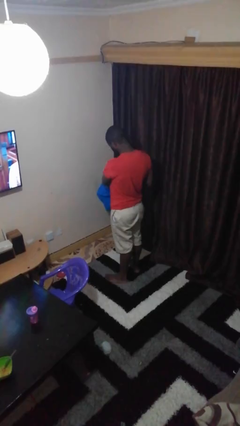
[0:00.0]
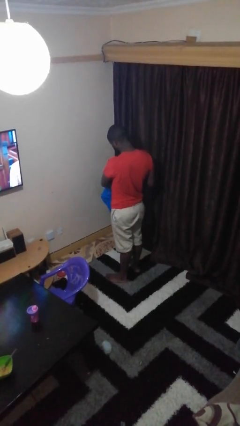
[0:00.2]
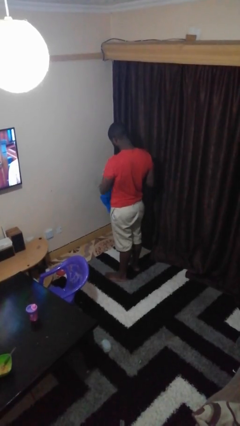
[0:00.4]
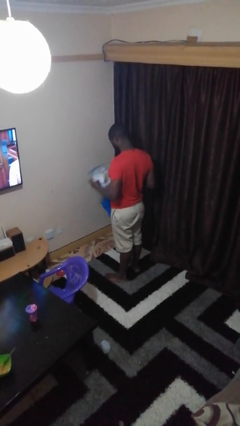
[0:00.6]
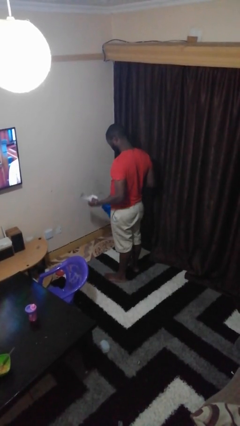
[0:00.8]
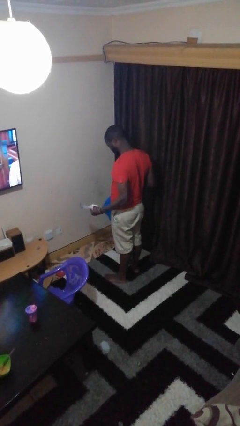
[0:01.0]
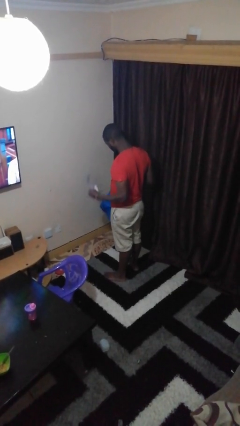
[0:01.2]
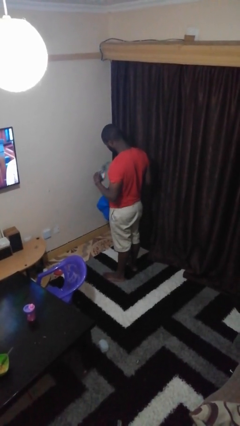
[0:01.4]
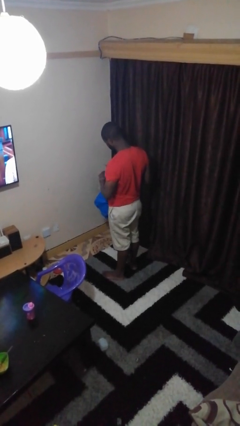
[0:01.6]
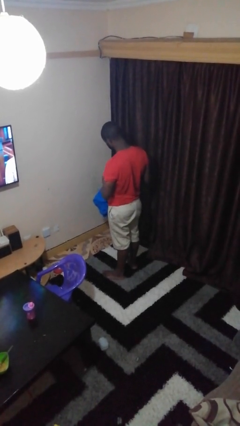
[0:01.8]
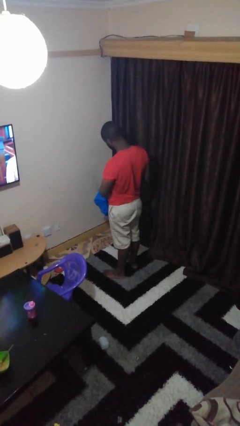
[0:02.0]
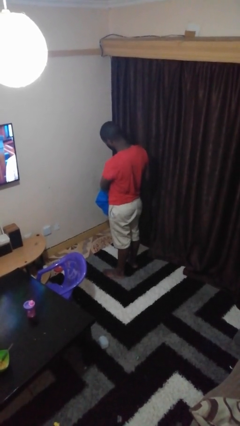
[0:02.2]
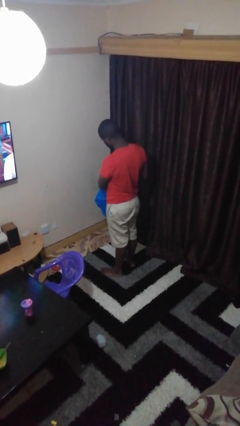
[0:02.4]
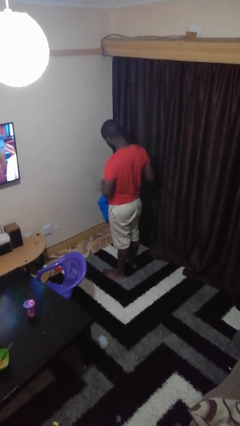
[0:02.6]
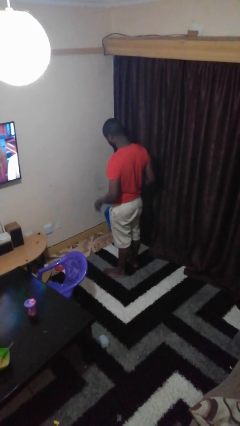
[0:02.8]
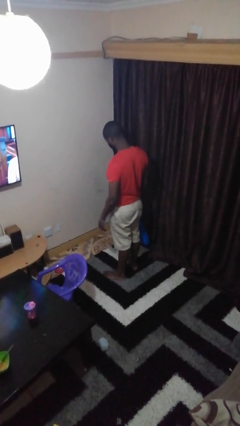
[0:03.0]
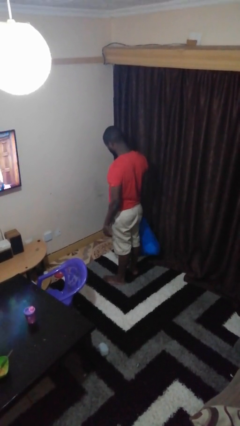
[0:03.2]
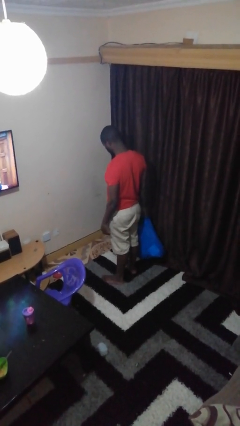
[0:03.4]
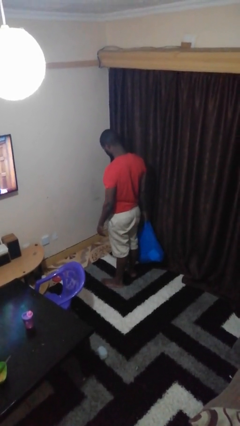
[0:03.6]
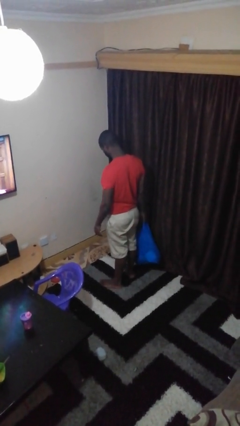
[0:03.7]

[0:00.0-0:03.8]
person puts object into bag

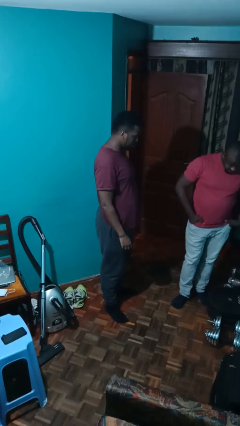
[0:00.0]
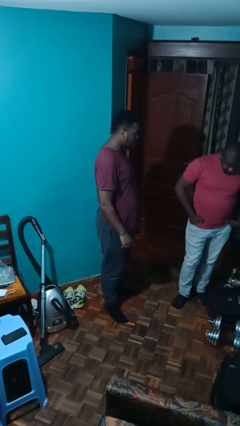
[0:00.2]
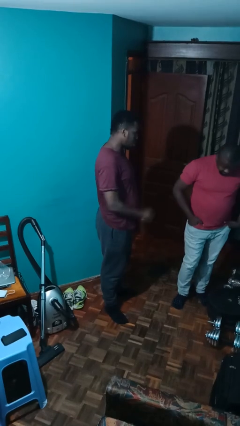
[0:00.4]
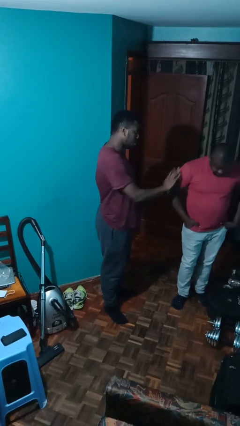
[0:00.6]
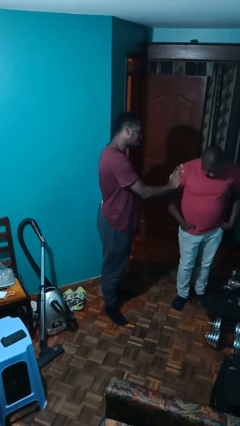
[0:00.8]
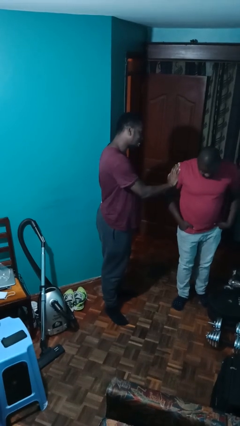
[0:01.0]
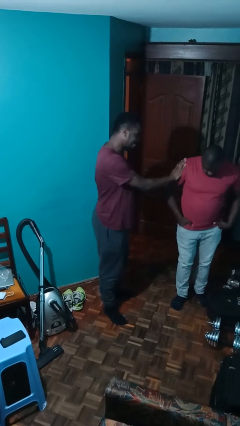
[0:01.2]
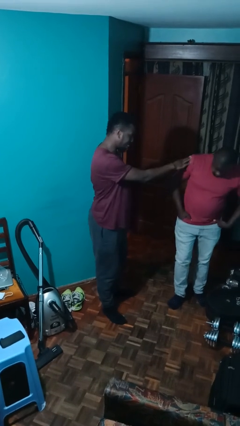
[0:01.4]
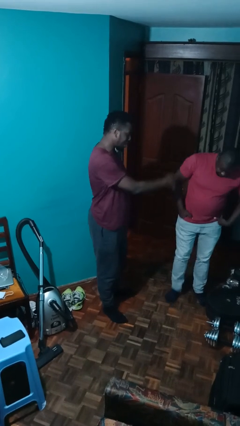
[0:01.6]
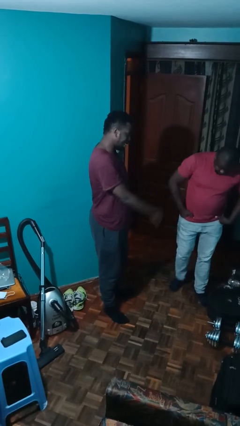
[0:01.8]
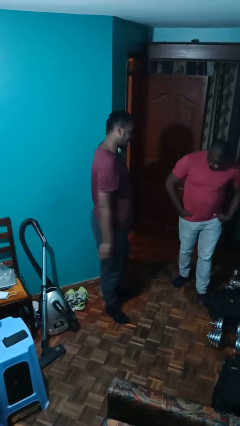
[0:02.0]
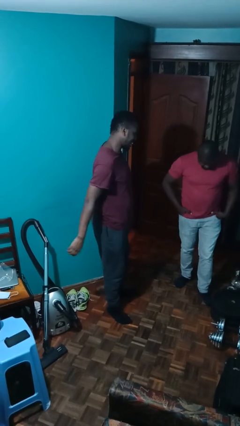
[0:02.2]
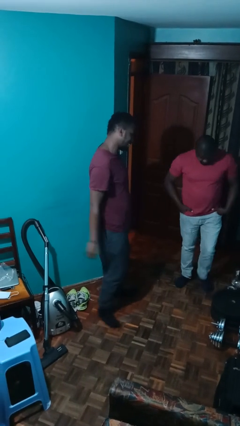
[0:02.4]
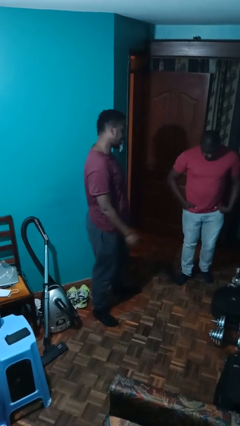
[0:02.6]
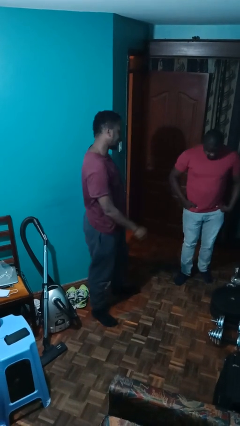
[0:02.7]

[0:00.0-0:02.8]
person shoves person

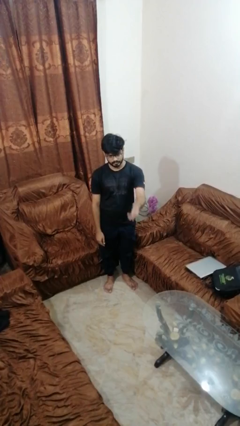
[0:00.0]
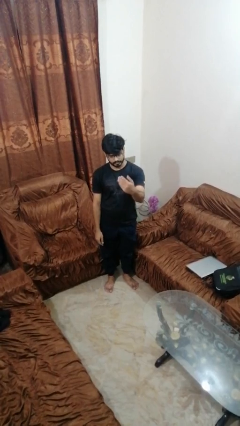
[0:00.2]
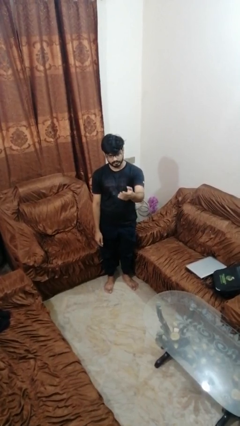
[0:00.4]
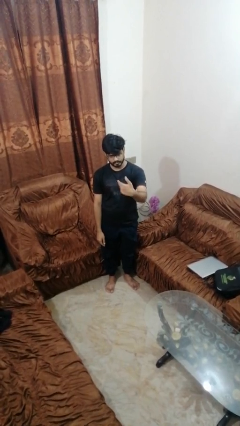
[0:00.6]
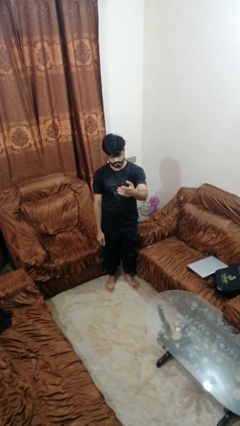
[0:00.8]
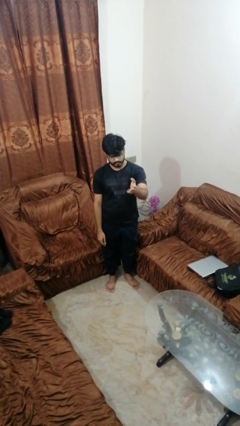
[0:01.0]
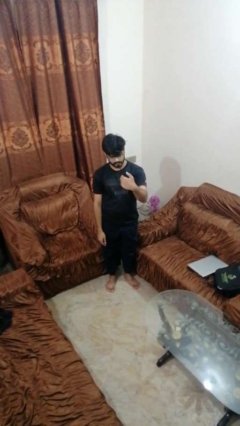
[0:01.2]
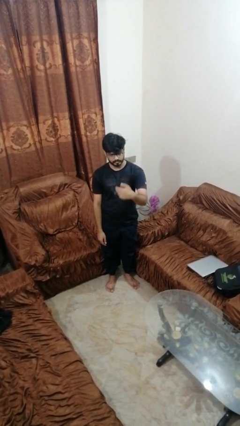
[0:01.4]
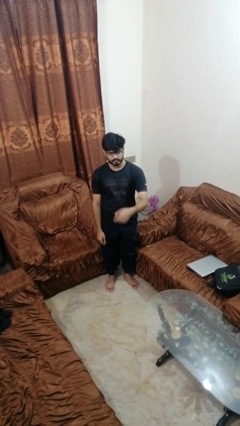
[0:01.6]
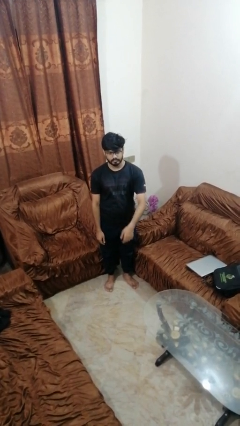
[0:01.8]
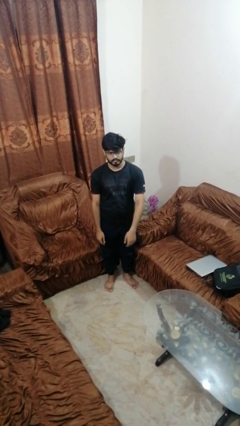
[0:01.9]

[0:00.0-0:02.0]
person gestures come here

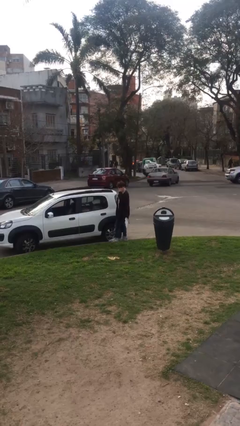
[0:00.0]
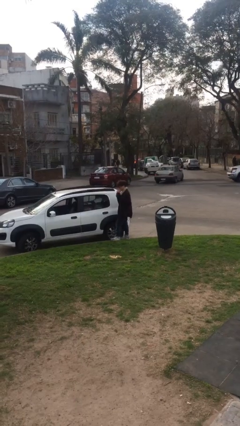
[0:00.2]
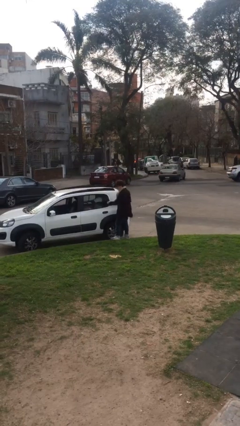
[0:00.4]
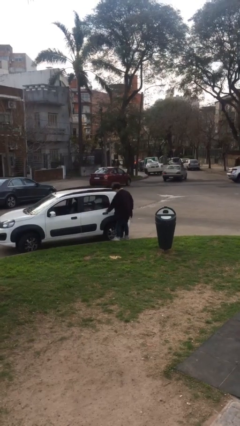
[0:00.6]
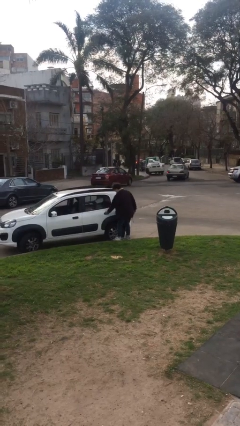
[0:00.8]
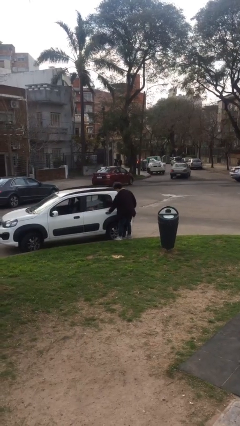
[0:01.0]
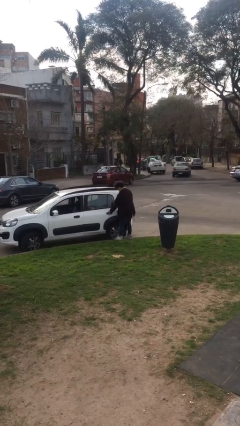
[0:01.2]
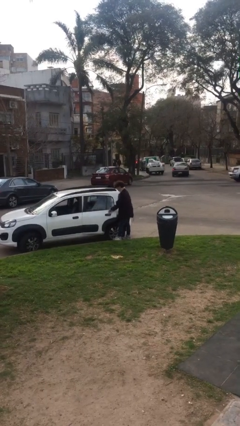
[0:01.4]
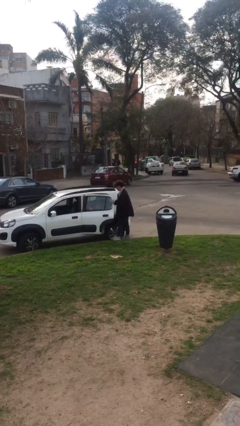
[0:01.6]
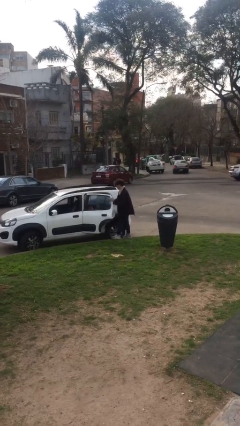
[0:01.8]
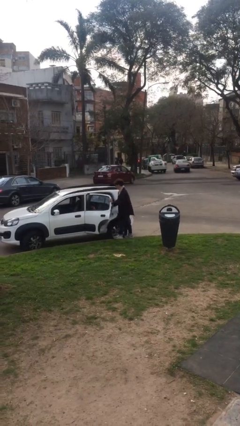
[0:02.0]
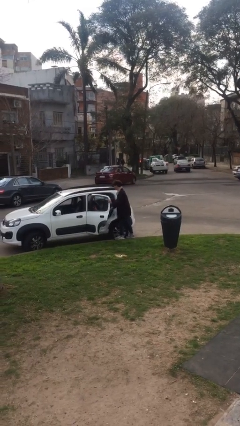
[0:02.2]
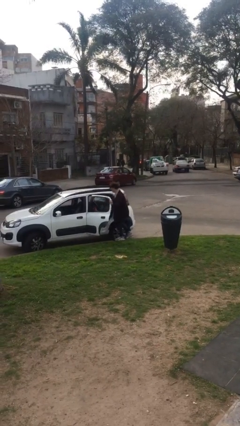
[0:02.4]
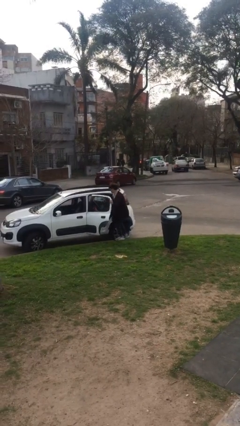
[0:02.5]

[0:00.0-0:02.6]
person opens car door

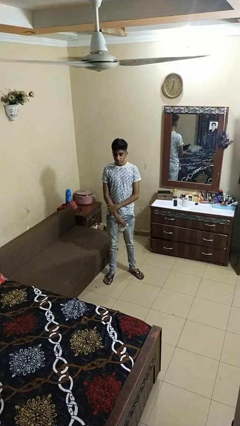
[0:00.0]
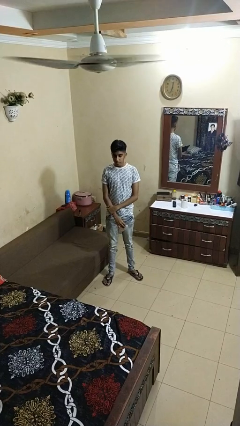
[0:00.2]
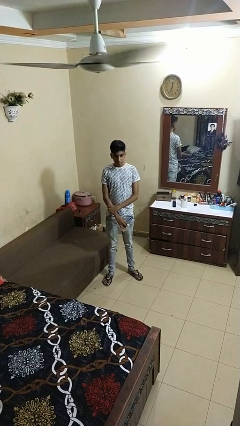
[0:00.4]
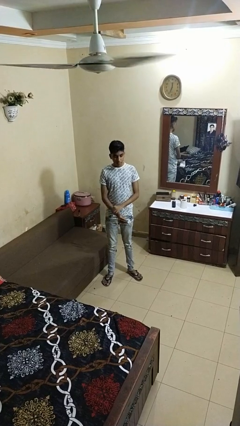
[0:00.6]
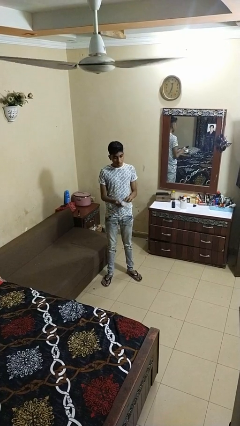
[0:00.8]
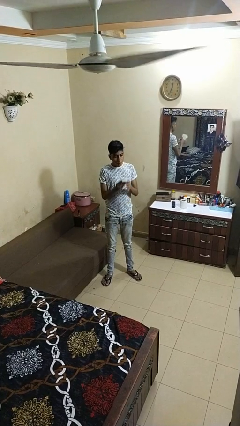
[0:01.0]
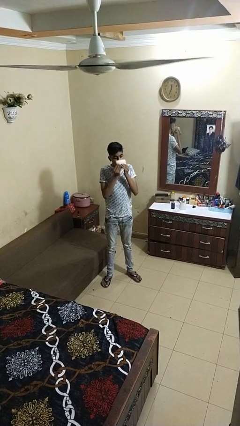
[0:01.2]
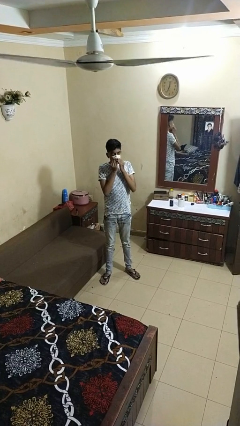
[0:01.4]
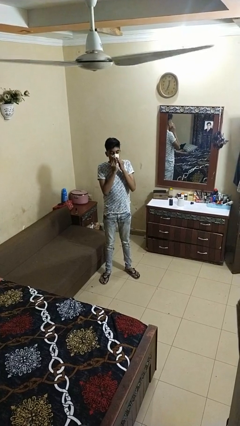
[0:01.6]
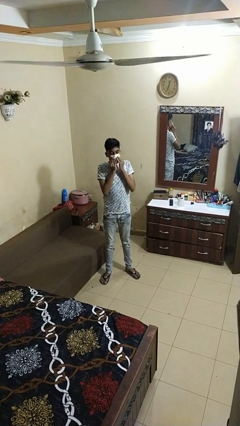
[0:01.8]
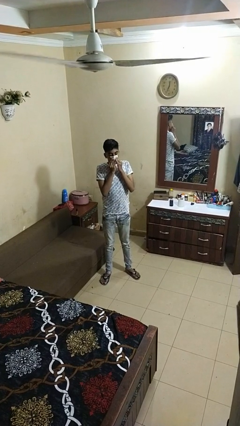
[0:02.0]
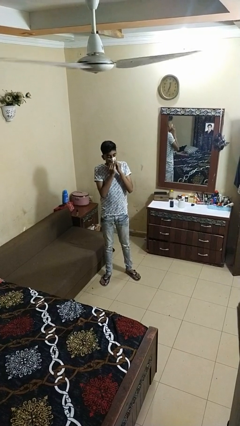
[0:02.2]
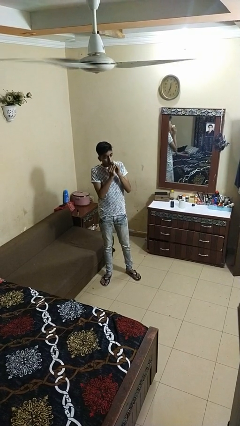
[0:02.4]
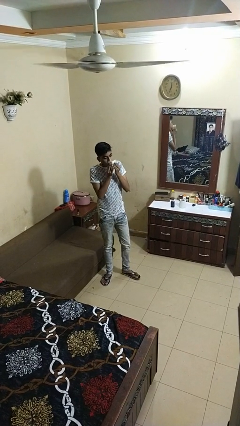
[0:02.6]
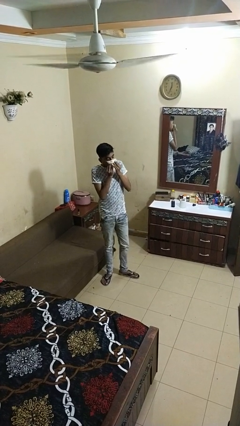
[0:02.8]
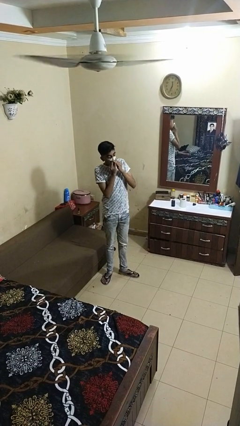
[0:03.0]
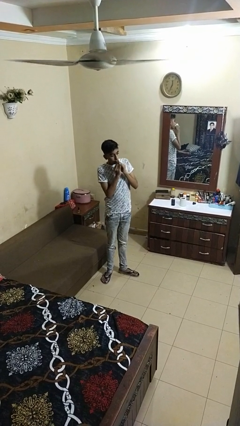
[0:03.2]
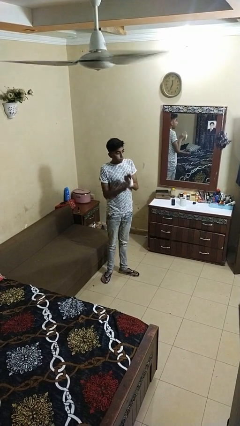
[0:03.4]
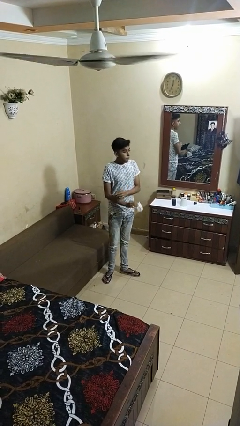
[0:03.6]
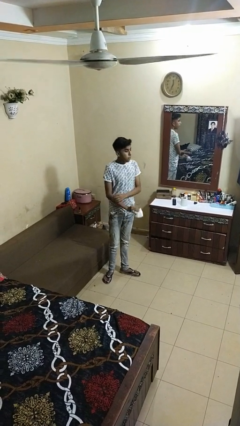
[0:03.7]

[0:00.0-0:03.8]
person blows nose

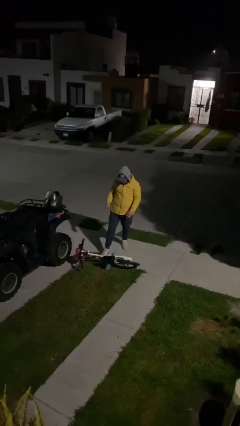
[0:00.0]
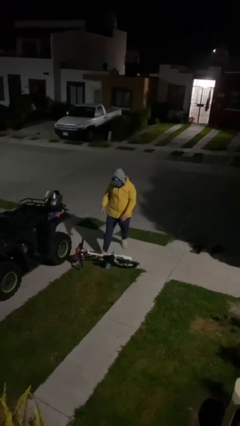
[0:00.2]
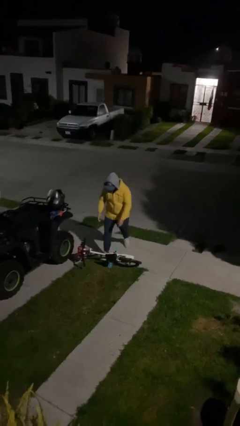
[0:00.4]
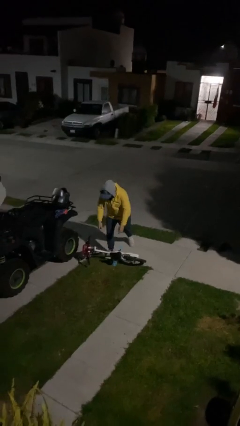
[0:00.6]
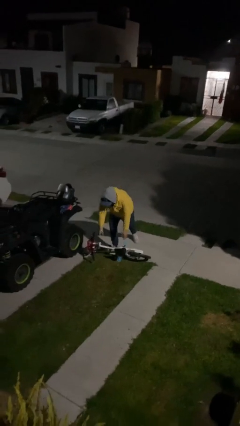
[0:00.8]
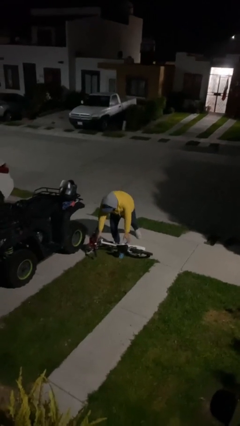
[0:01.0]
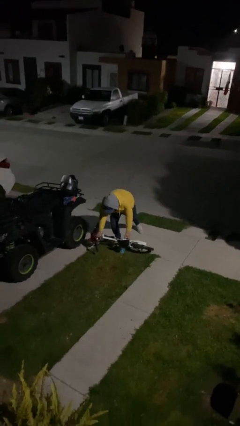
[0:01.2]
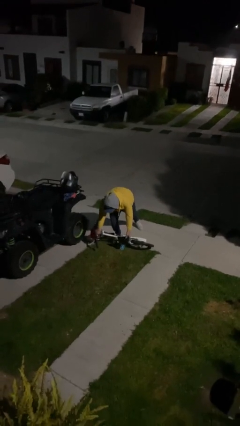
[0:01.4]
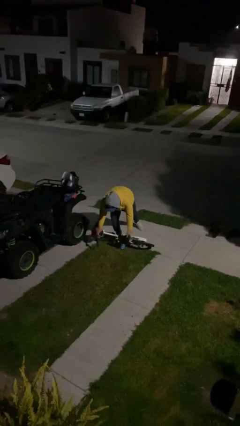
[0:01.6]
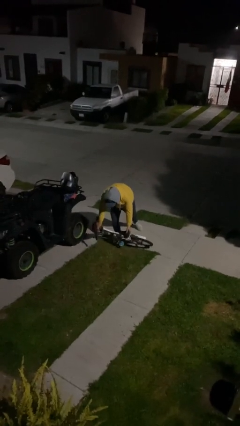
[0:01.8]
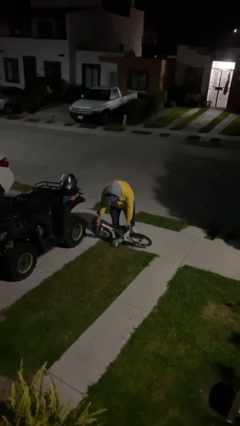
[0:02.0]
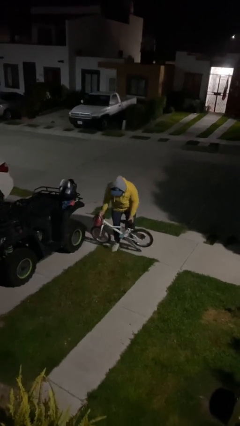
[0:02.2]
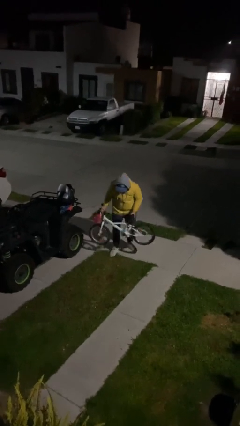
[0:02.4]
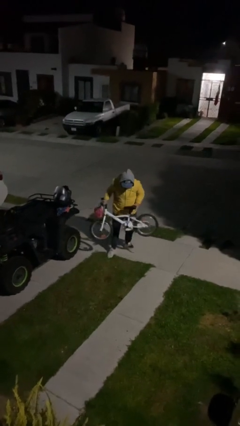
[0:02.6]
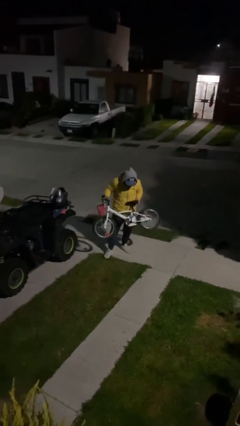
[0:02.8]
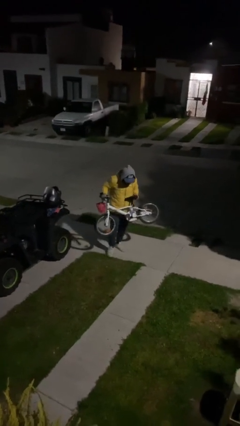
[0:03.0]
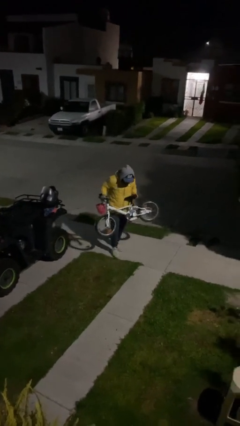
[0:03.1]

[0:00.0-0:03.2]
person picks up object from floor
